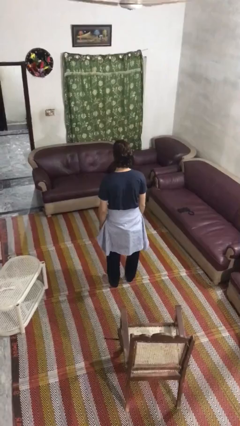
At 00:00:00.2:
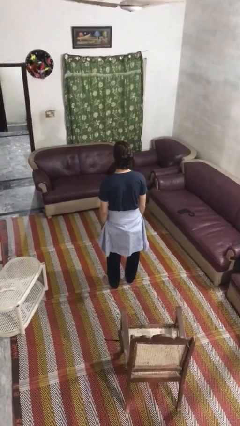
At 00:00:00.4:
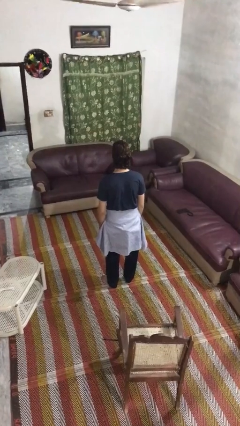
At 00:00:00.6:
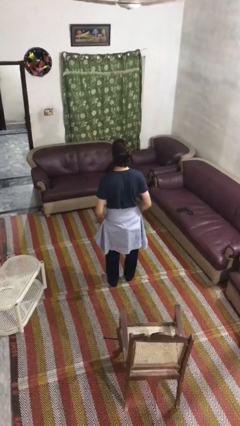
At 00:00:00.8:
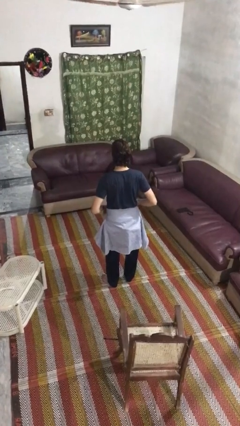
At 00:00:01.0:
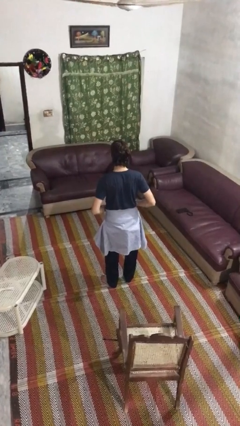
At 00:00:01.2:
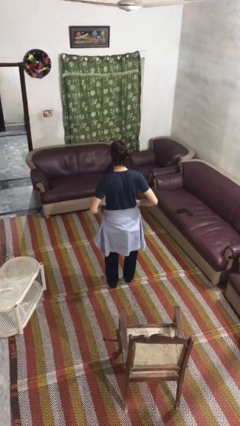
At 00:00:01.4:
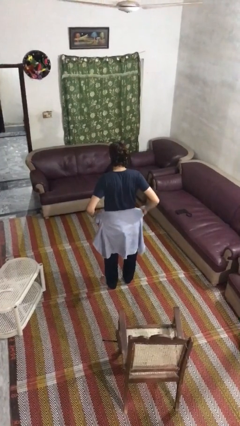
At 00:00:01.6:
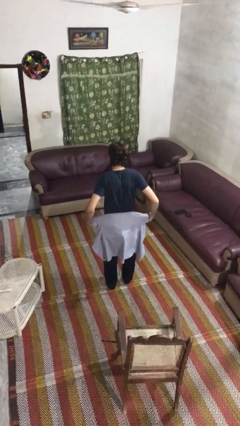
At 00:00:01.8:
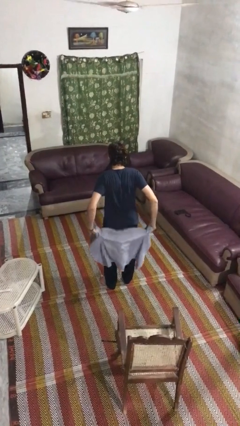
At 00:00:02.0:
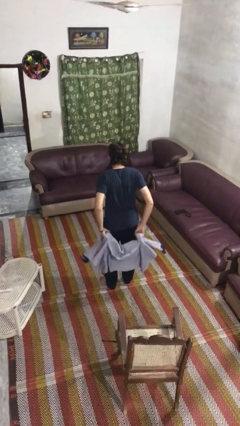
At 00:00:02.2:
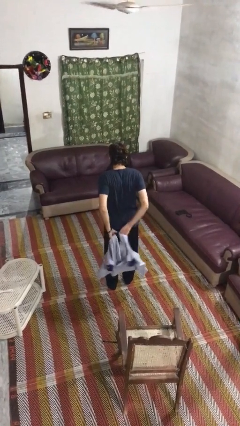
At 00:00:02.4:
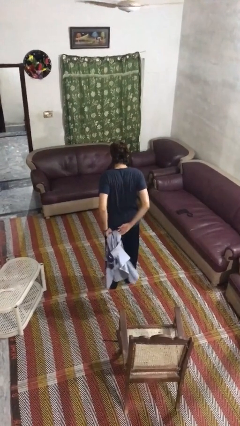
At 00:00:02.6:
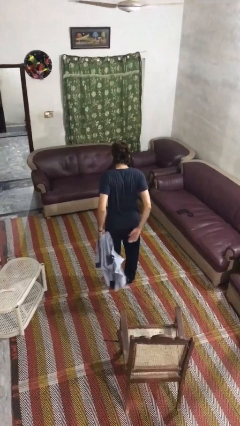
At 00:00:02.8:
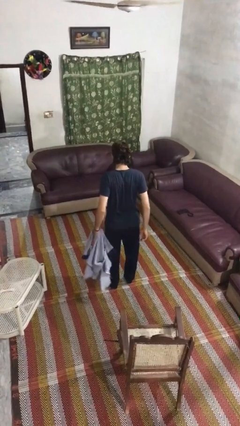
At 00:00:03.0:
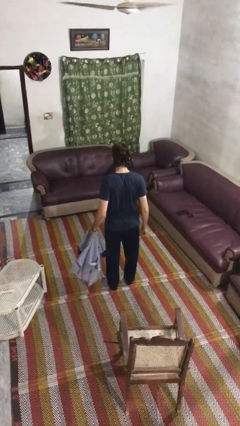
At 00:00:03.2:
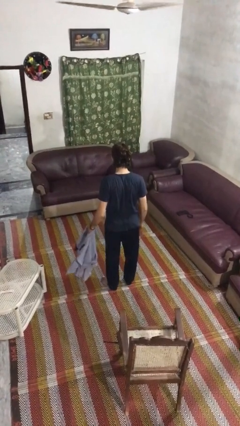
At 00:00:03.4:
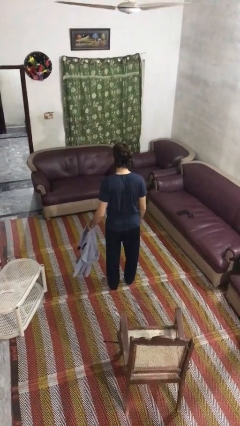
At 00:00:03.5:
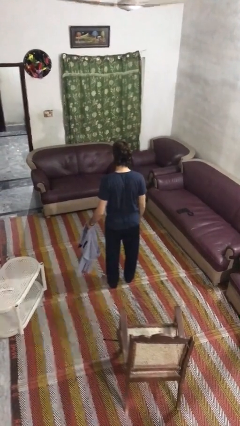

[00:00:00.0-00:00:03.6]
person unties jacket around waist

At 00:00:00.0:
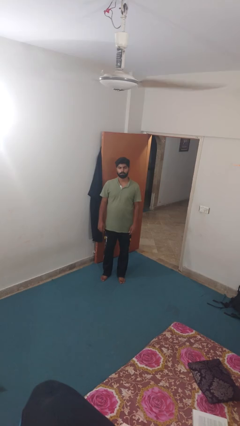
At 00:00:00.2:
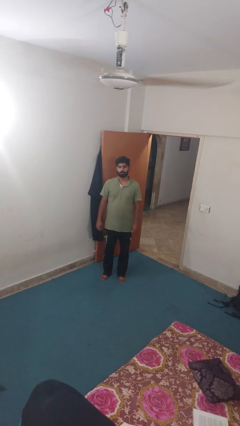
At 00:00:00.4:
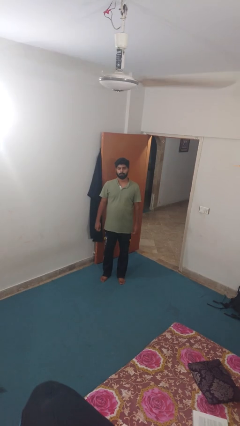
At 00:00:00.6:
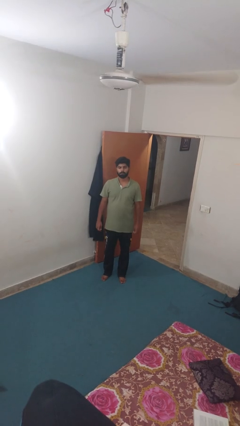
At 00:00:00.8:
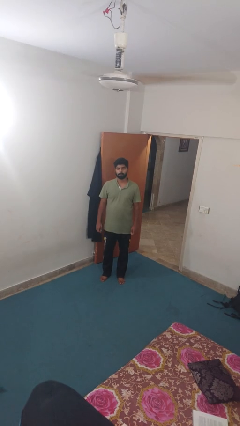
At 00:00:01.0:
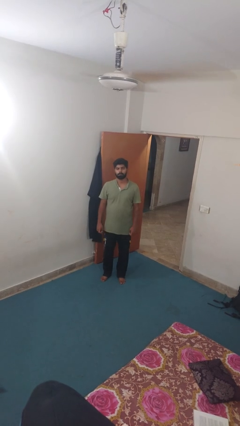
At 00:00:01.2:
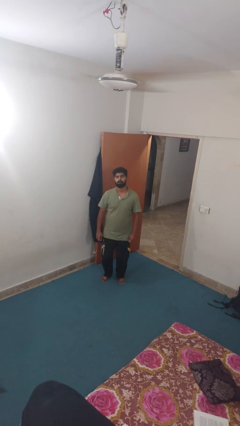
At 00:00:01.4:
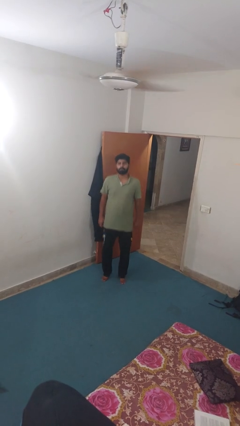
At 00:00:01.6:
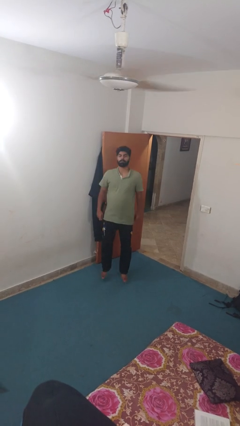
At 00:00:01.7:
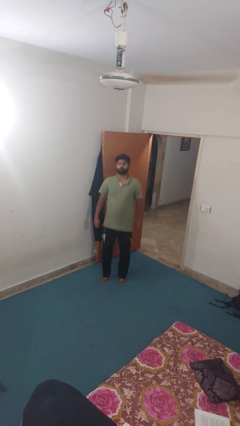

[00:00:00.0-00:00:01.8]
person jumps

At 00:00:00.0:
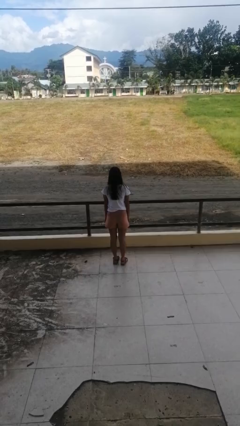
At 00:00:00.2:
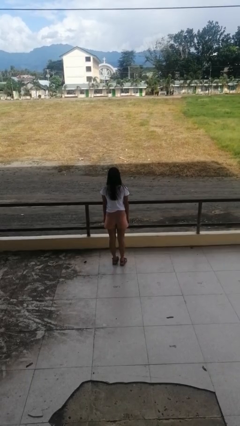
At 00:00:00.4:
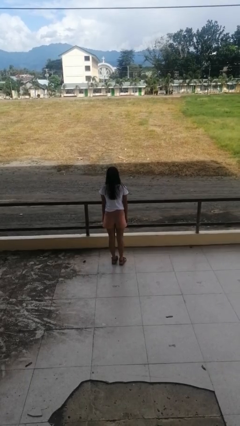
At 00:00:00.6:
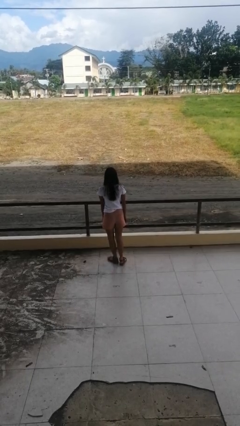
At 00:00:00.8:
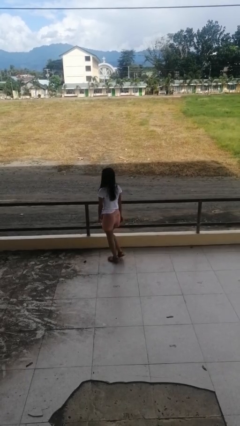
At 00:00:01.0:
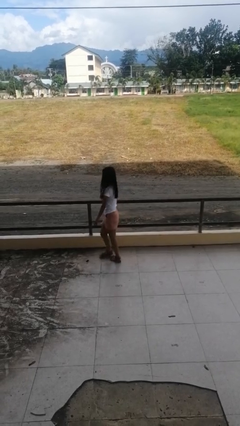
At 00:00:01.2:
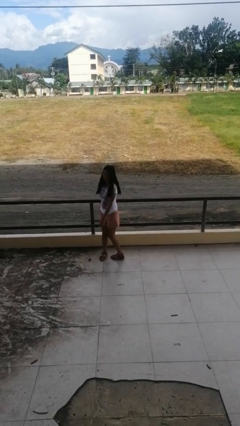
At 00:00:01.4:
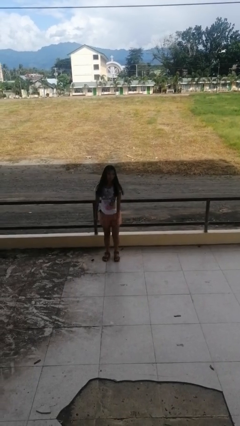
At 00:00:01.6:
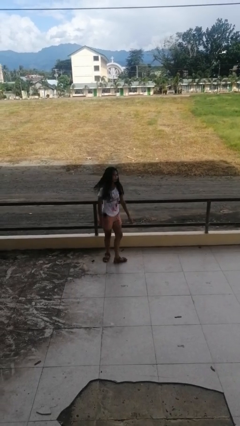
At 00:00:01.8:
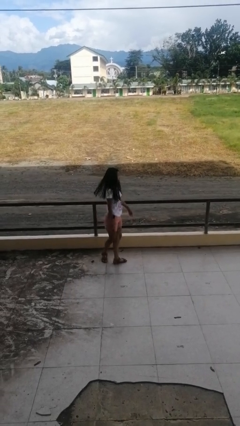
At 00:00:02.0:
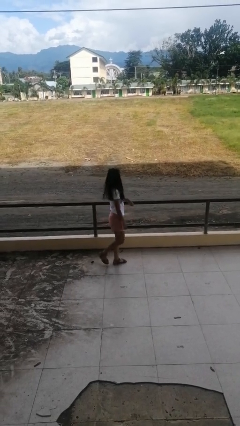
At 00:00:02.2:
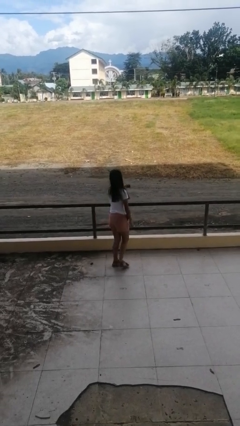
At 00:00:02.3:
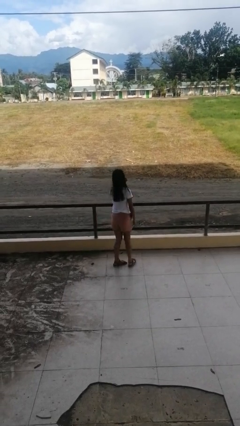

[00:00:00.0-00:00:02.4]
person twirls

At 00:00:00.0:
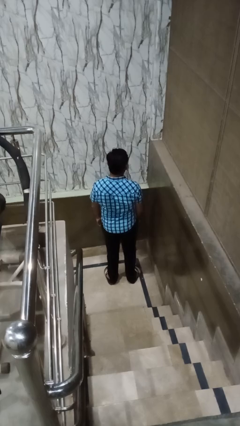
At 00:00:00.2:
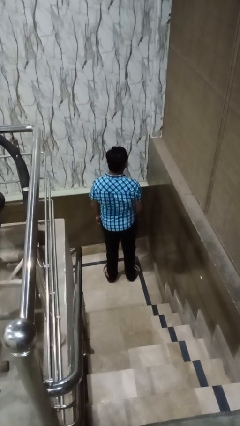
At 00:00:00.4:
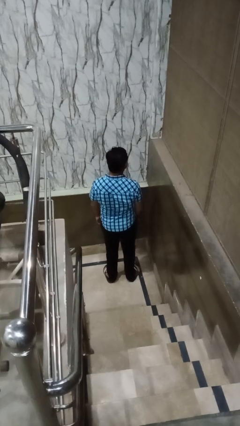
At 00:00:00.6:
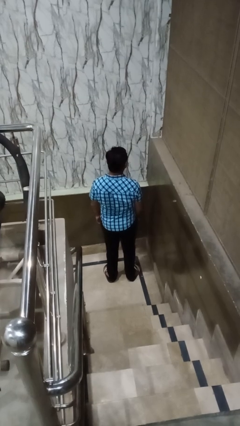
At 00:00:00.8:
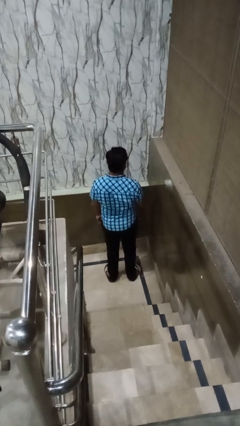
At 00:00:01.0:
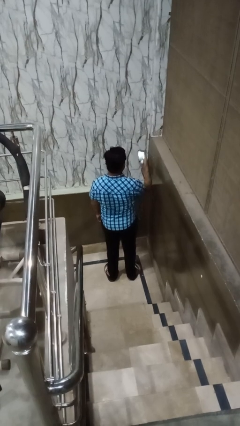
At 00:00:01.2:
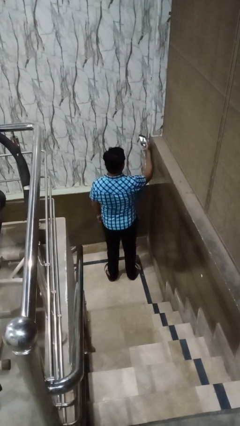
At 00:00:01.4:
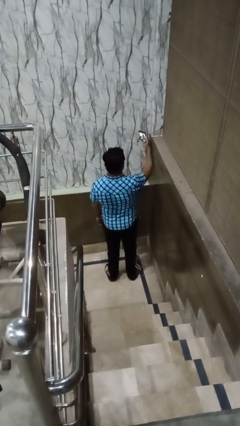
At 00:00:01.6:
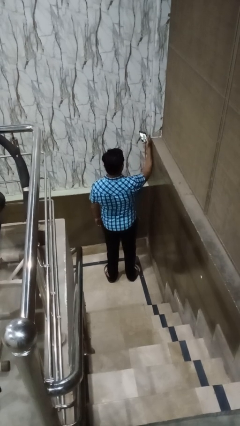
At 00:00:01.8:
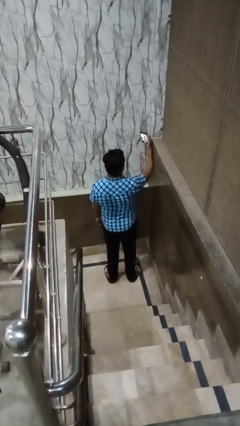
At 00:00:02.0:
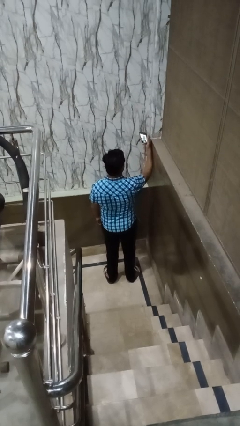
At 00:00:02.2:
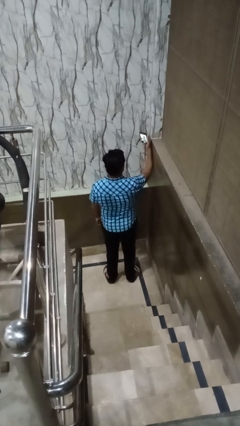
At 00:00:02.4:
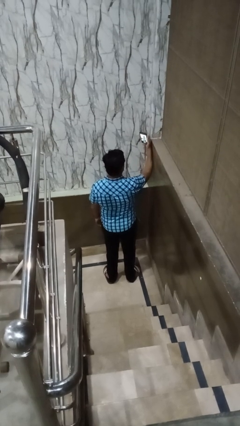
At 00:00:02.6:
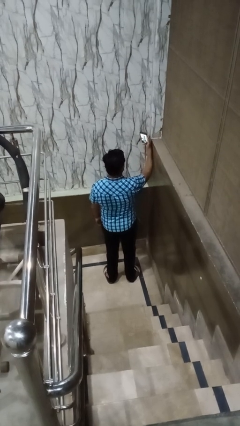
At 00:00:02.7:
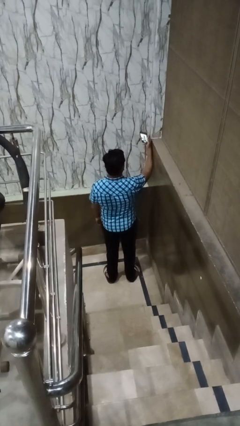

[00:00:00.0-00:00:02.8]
person takes selfie

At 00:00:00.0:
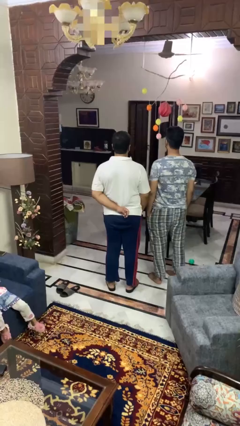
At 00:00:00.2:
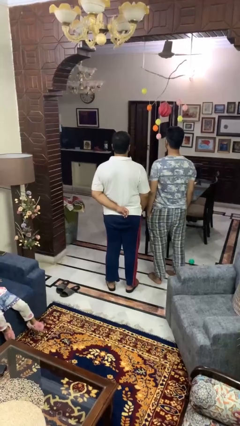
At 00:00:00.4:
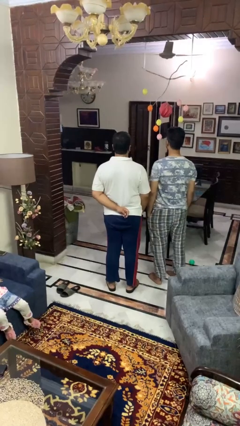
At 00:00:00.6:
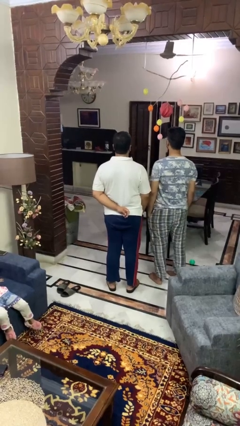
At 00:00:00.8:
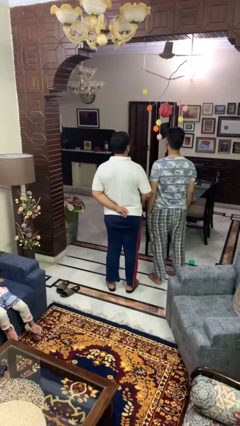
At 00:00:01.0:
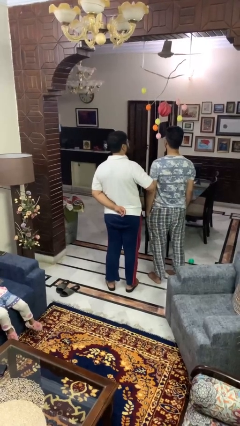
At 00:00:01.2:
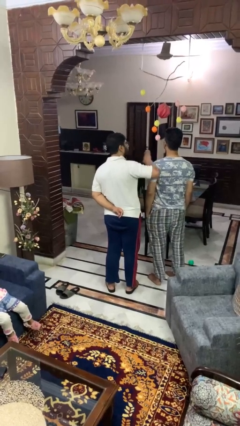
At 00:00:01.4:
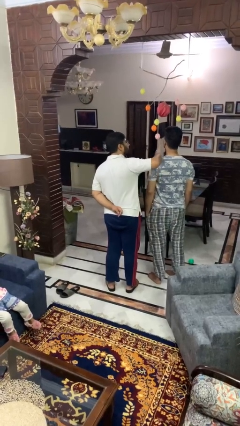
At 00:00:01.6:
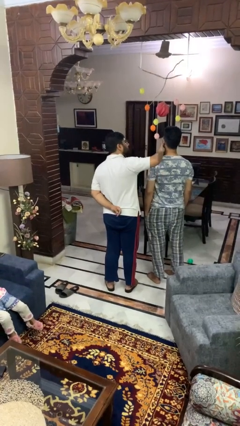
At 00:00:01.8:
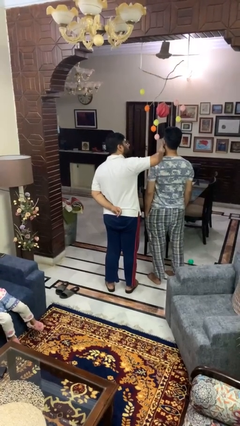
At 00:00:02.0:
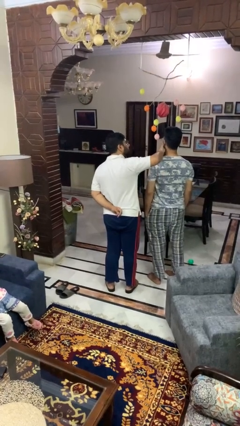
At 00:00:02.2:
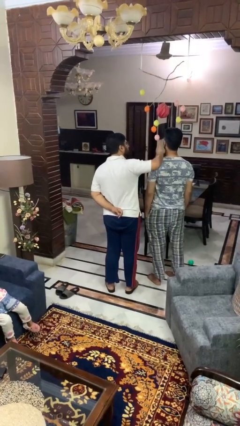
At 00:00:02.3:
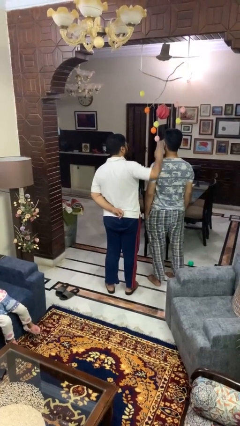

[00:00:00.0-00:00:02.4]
person nudges person with elbow

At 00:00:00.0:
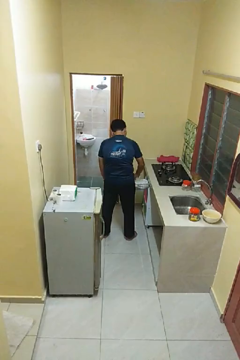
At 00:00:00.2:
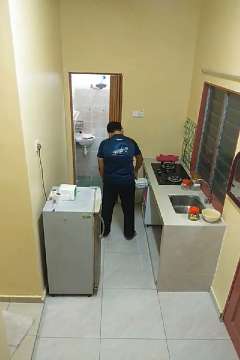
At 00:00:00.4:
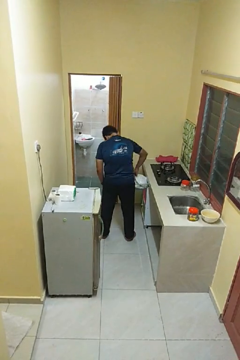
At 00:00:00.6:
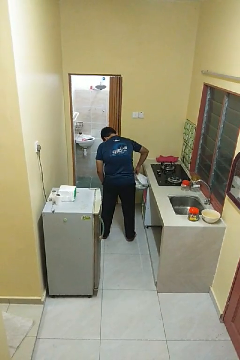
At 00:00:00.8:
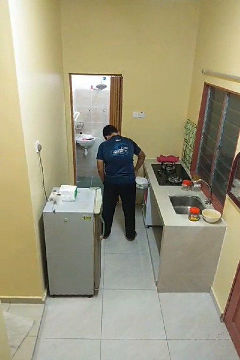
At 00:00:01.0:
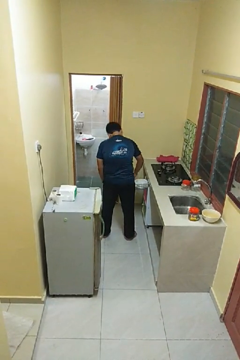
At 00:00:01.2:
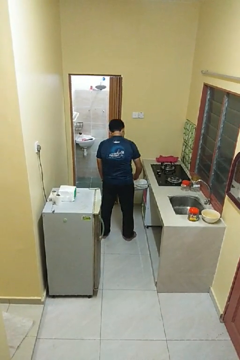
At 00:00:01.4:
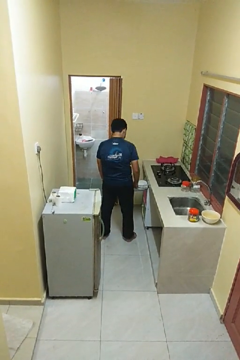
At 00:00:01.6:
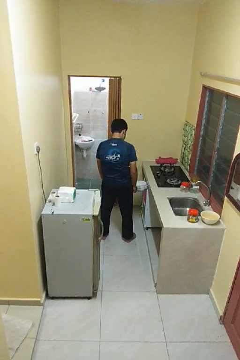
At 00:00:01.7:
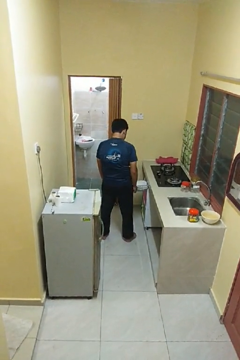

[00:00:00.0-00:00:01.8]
person searches in kitchen drawer

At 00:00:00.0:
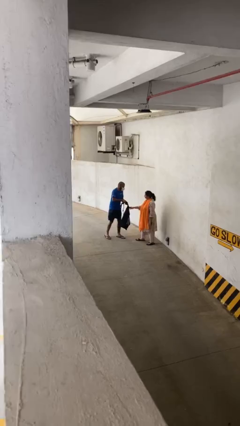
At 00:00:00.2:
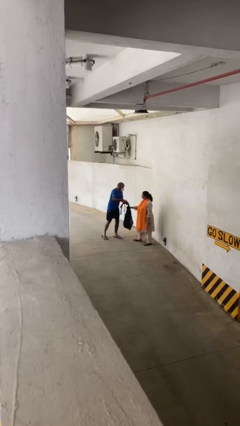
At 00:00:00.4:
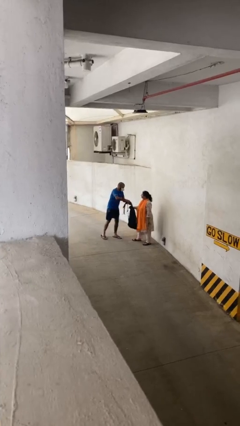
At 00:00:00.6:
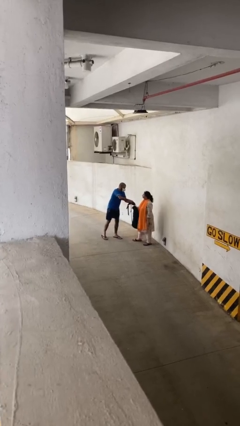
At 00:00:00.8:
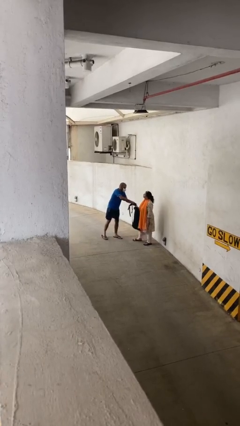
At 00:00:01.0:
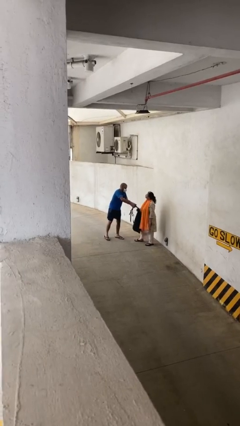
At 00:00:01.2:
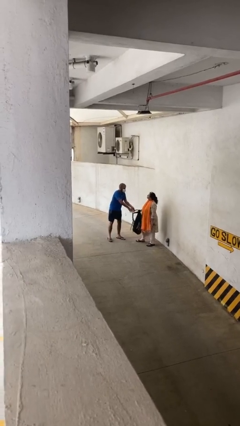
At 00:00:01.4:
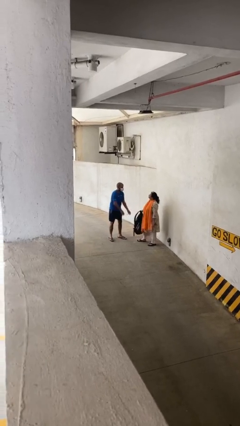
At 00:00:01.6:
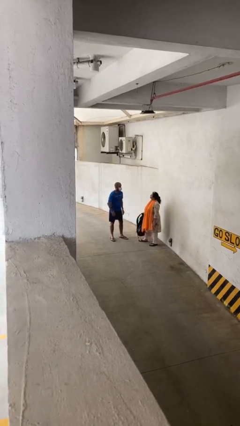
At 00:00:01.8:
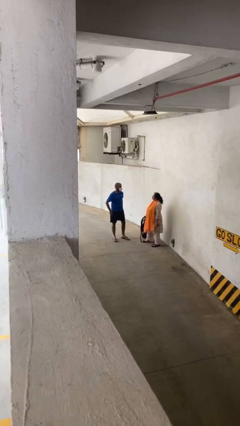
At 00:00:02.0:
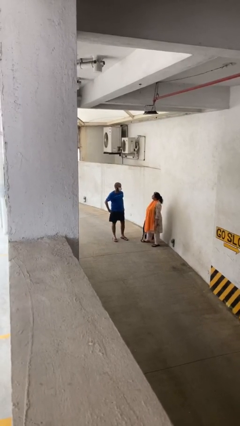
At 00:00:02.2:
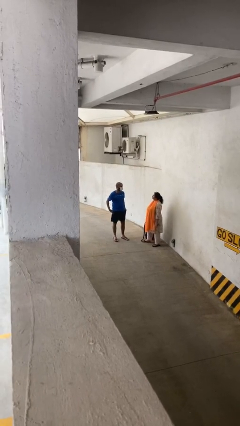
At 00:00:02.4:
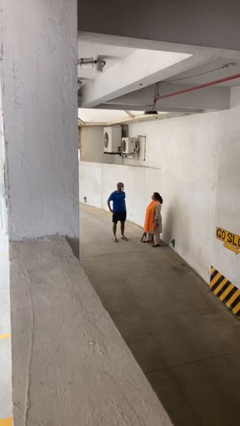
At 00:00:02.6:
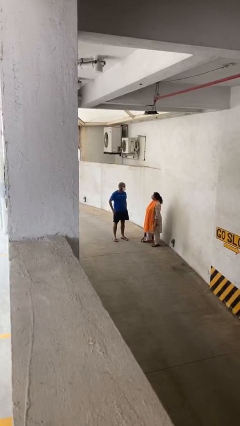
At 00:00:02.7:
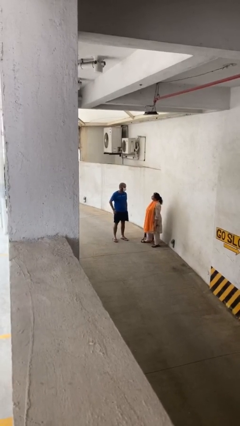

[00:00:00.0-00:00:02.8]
person transfers object to person
